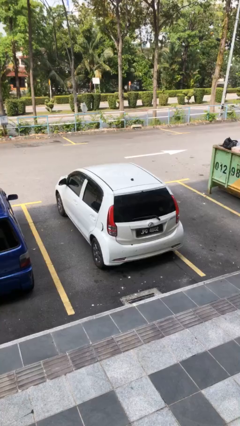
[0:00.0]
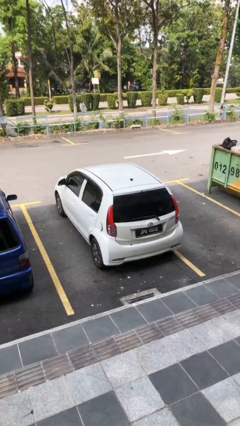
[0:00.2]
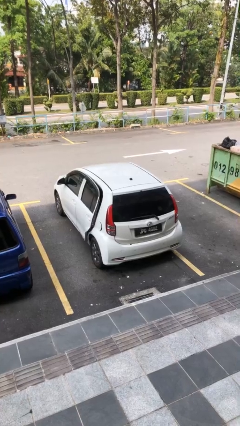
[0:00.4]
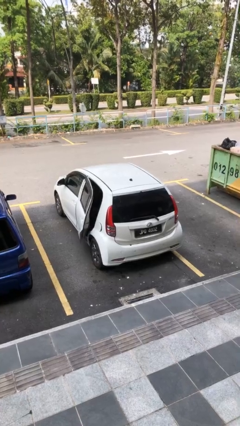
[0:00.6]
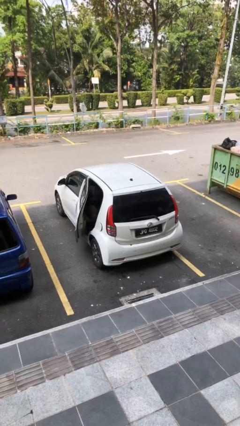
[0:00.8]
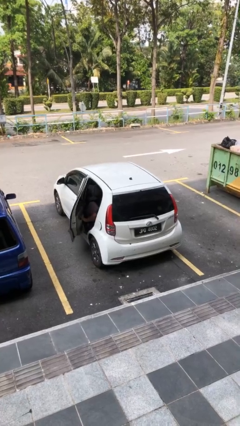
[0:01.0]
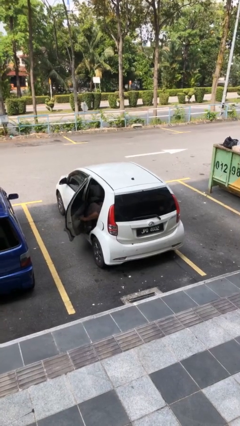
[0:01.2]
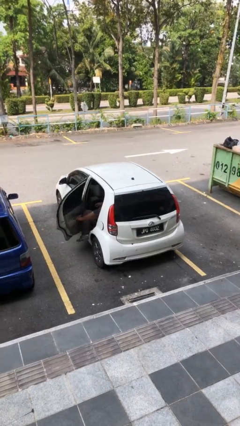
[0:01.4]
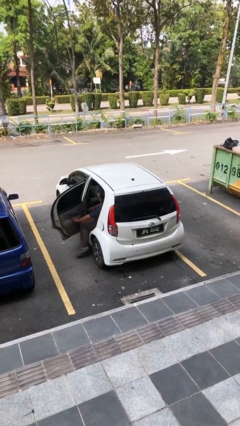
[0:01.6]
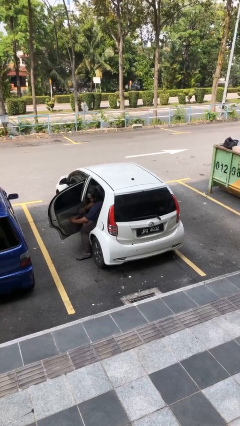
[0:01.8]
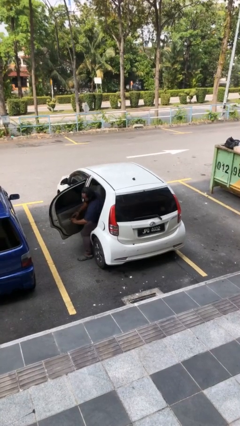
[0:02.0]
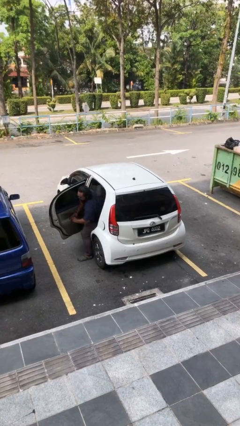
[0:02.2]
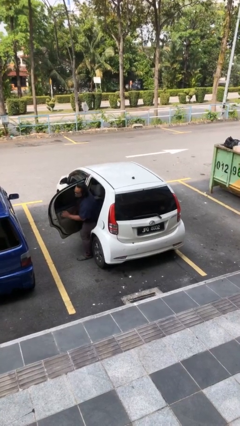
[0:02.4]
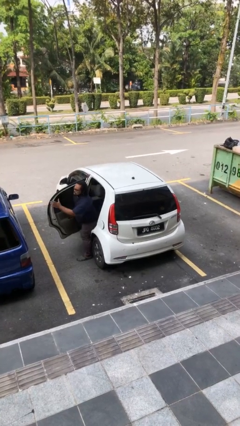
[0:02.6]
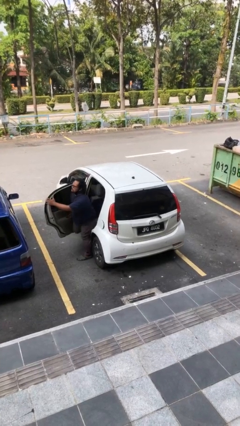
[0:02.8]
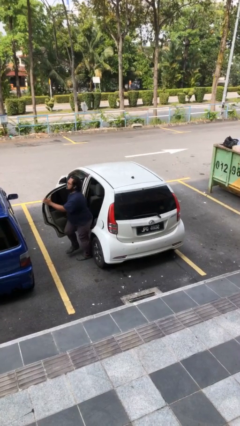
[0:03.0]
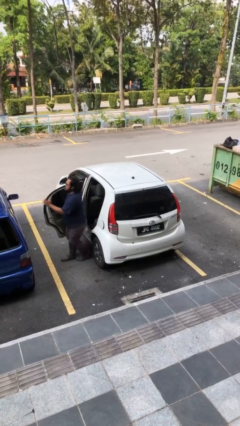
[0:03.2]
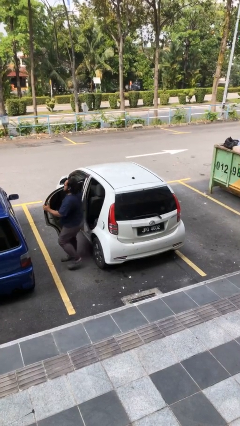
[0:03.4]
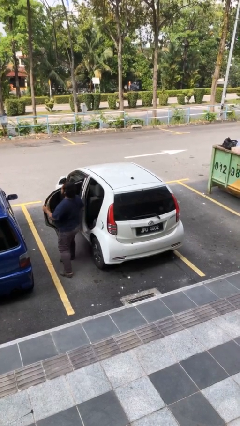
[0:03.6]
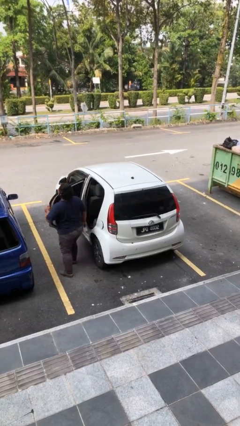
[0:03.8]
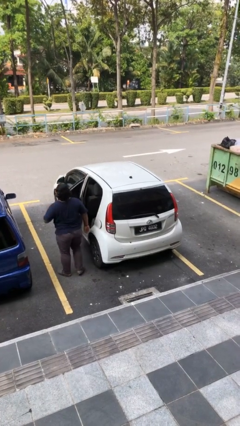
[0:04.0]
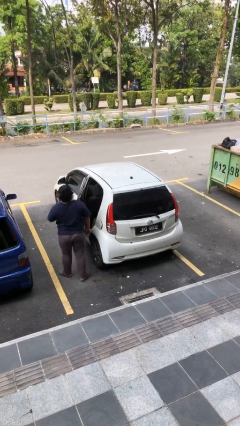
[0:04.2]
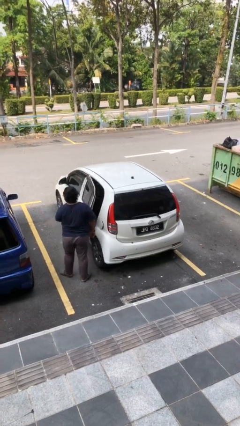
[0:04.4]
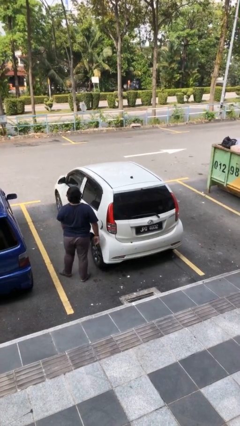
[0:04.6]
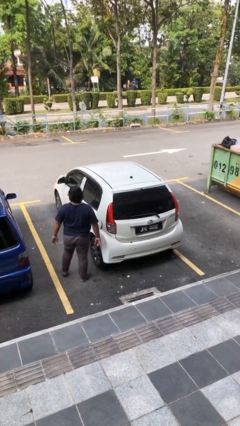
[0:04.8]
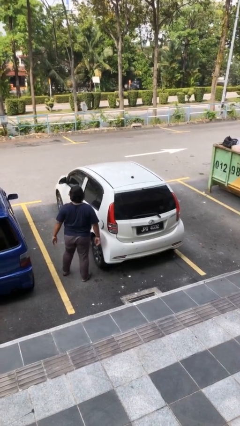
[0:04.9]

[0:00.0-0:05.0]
car drops off person

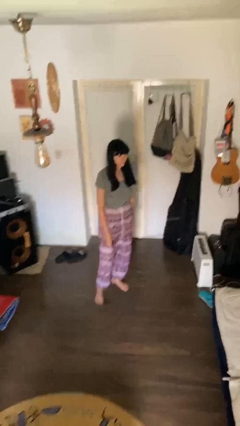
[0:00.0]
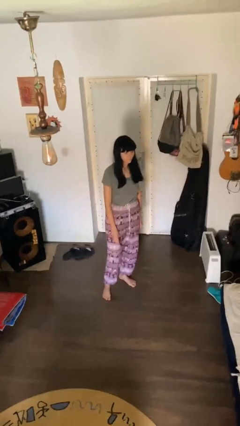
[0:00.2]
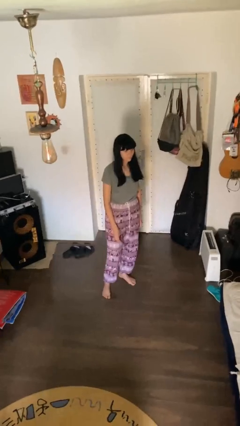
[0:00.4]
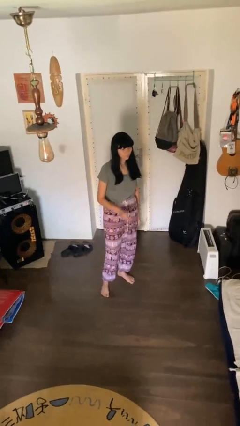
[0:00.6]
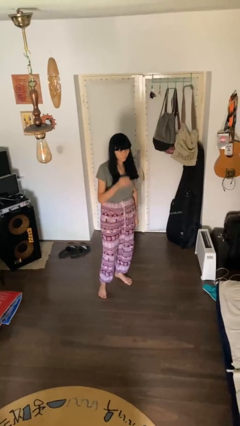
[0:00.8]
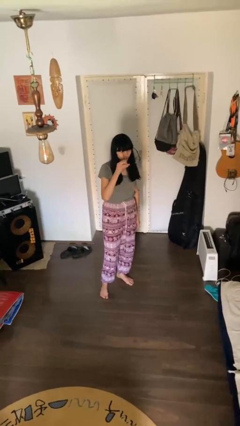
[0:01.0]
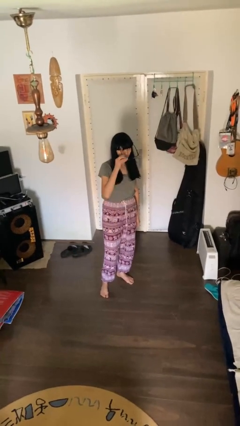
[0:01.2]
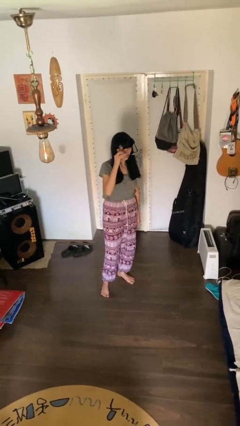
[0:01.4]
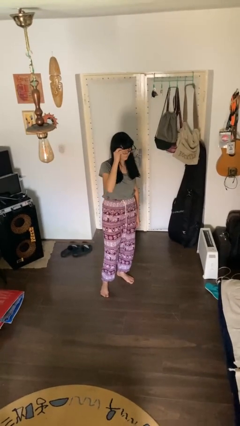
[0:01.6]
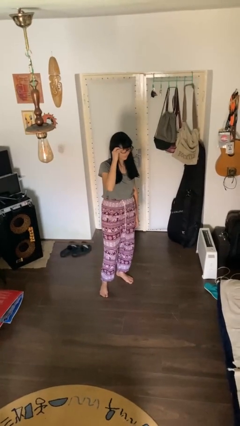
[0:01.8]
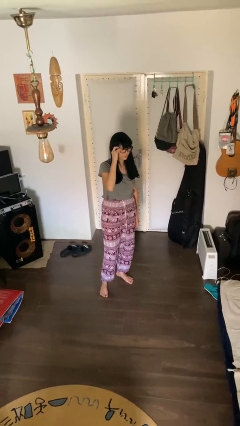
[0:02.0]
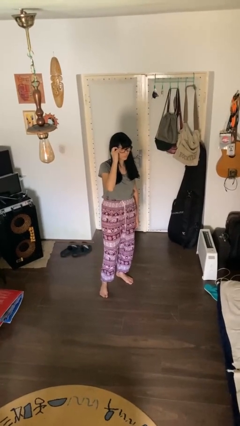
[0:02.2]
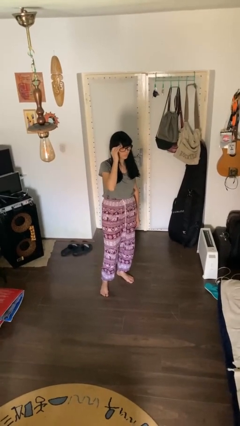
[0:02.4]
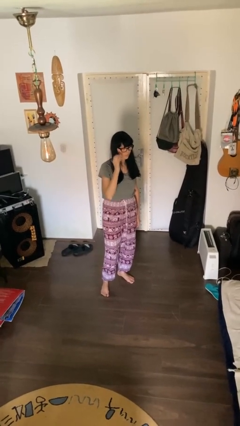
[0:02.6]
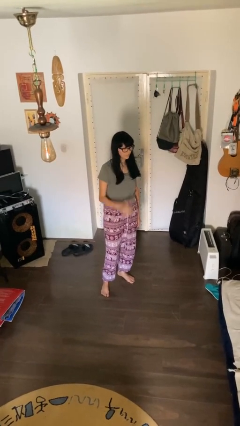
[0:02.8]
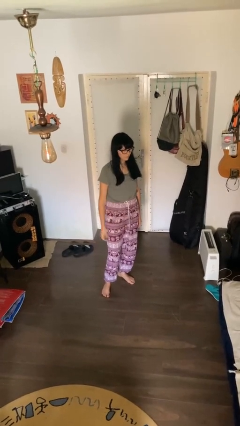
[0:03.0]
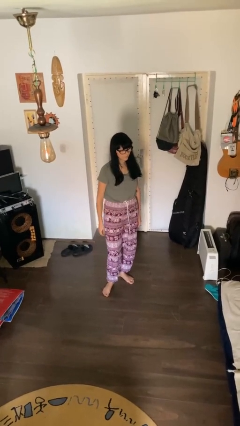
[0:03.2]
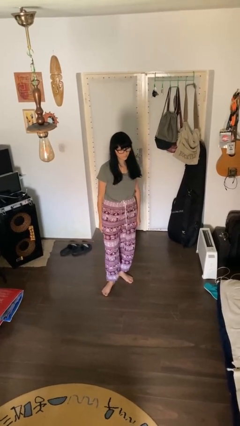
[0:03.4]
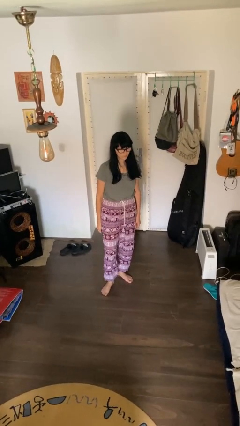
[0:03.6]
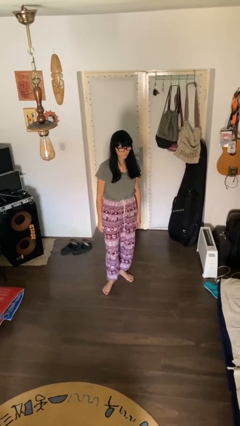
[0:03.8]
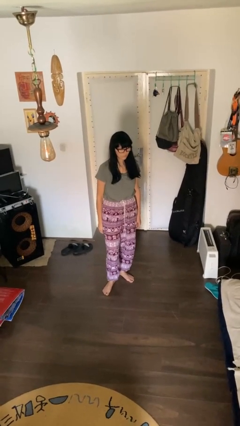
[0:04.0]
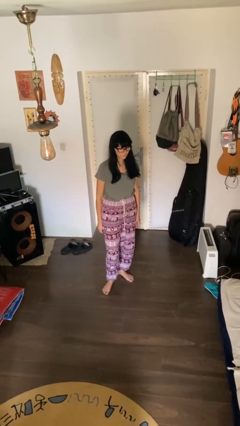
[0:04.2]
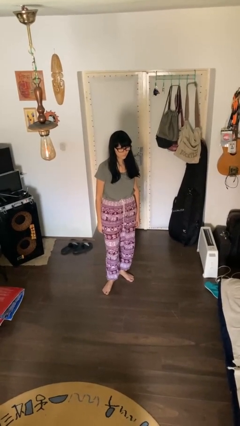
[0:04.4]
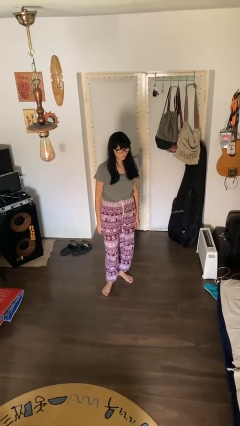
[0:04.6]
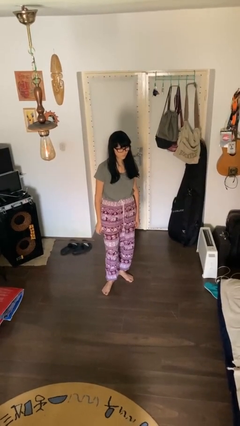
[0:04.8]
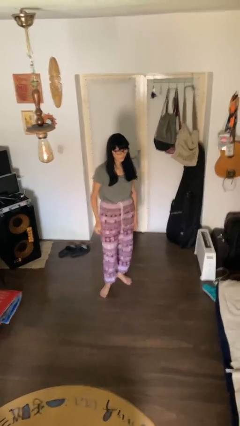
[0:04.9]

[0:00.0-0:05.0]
person puts on glasses

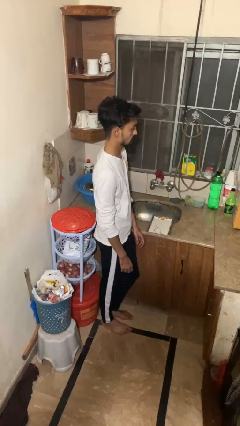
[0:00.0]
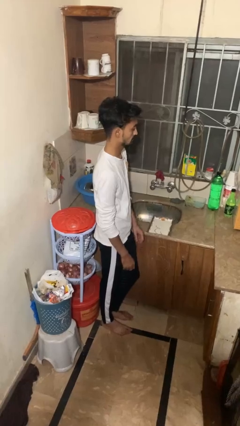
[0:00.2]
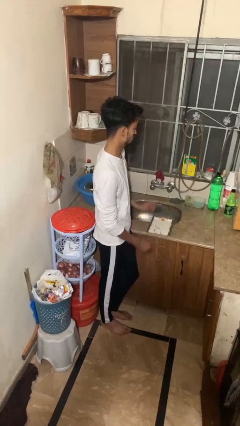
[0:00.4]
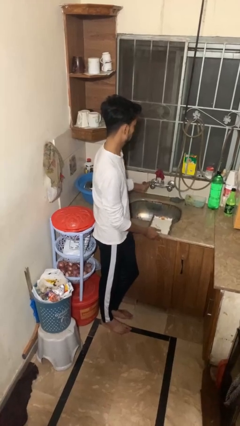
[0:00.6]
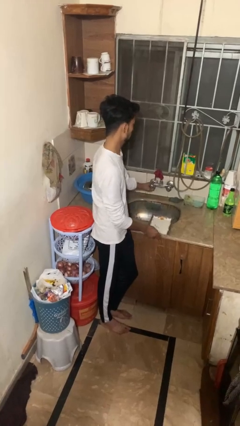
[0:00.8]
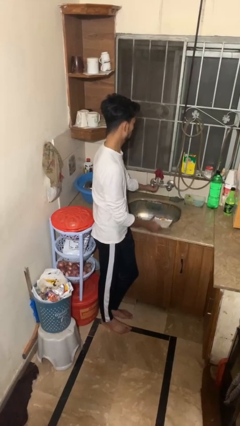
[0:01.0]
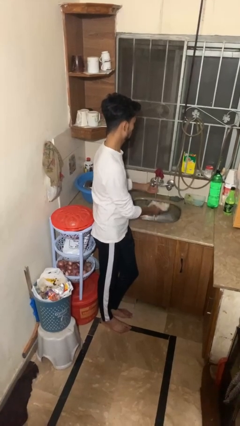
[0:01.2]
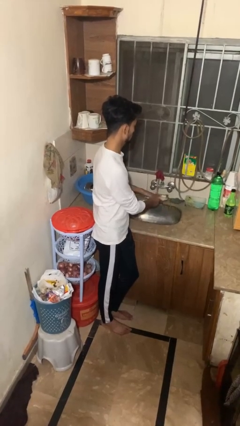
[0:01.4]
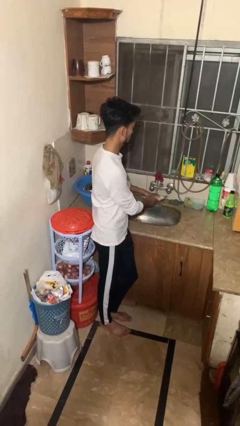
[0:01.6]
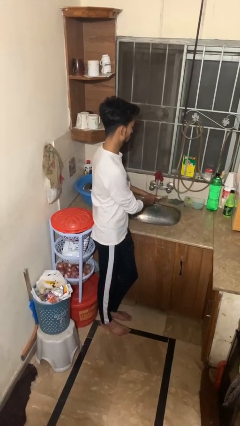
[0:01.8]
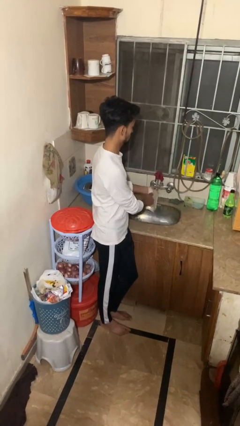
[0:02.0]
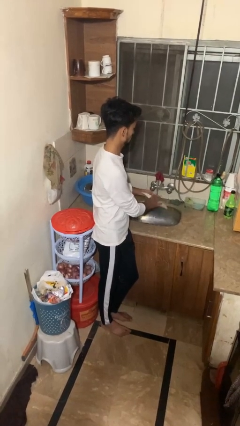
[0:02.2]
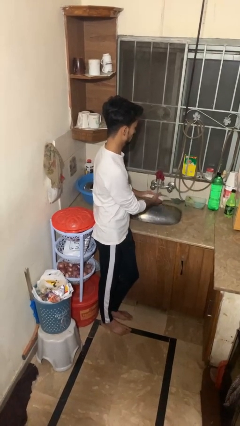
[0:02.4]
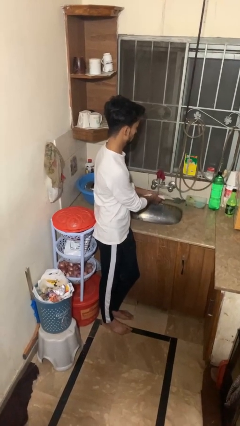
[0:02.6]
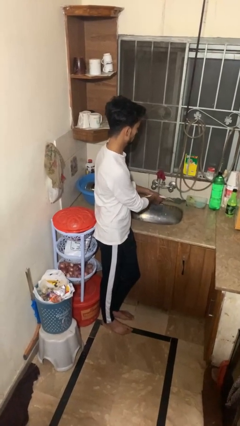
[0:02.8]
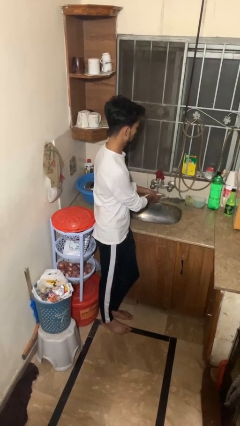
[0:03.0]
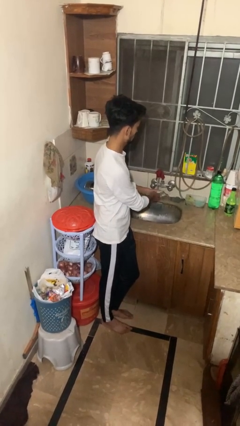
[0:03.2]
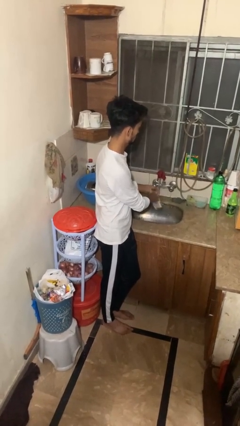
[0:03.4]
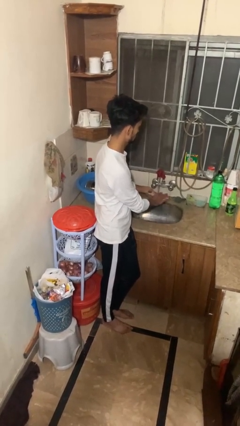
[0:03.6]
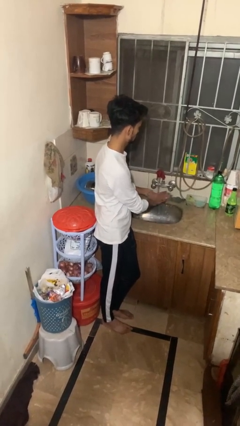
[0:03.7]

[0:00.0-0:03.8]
person opens dishwasher

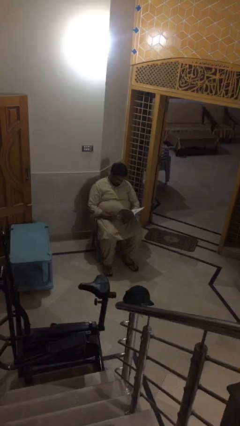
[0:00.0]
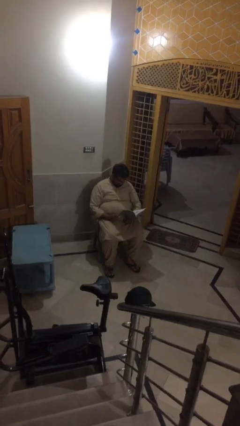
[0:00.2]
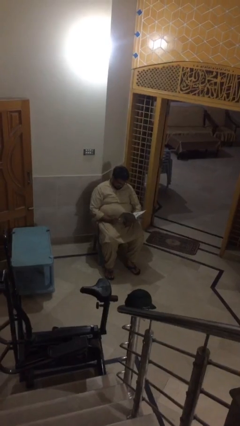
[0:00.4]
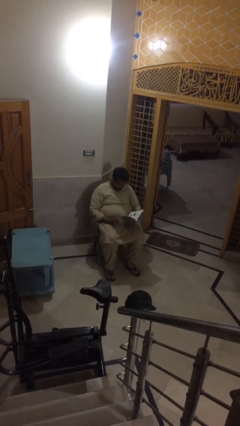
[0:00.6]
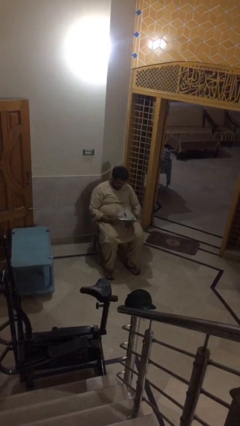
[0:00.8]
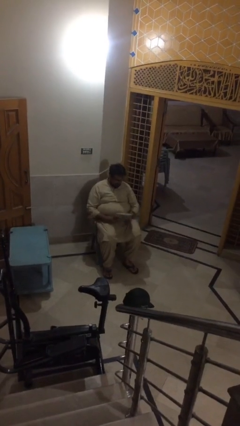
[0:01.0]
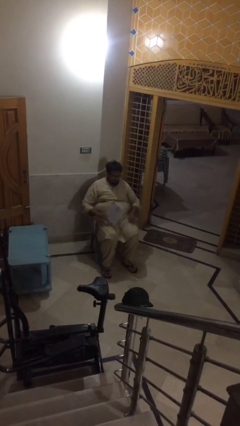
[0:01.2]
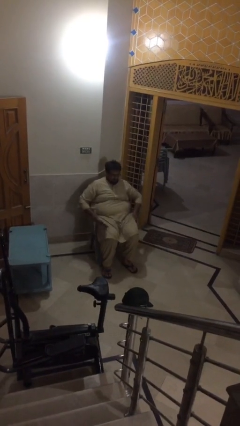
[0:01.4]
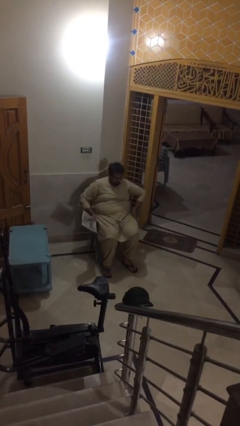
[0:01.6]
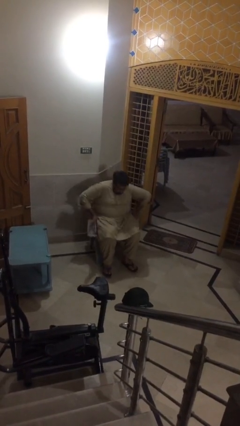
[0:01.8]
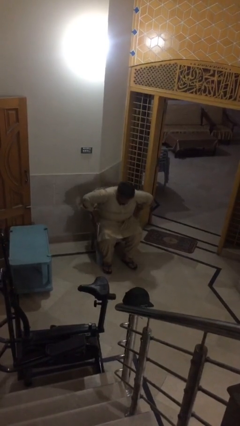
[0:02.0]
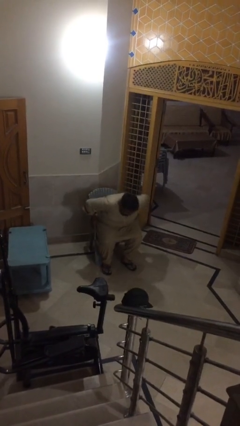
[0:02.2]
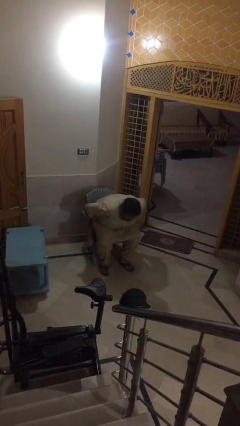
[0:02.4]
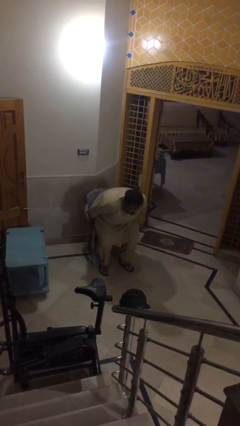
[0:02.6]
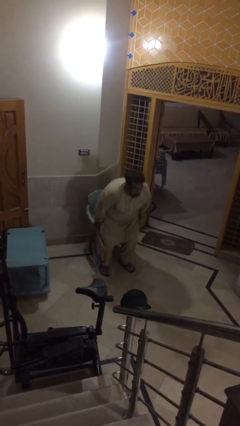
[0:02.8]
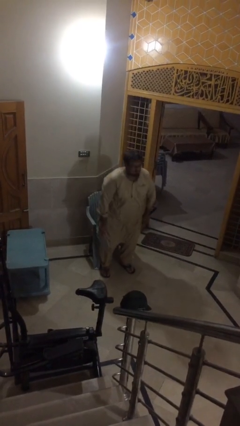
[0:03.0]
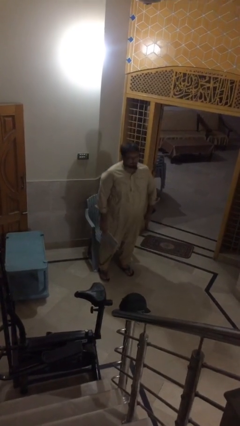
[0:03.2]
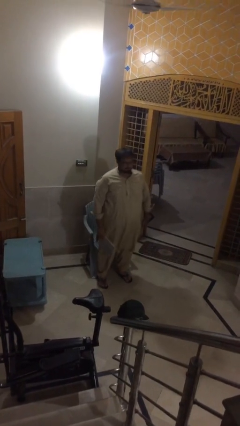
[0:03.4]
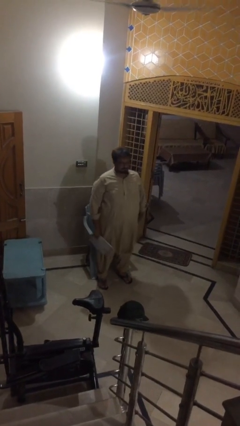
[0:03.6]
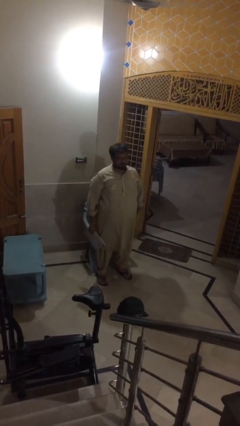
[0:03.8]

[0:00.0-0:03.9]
person stands up
